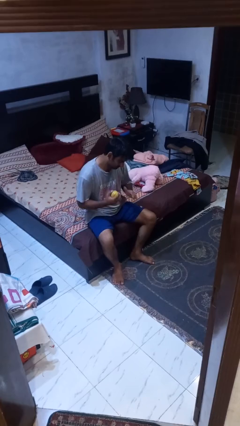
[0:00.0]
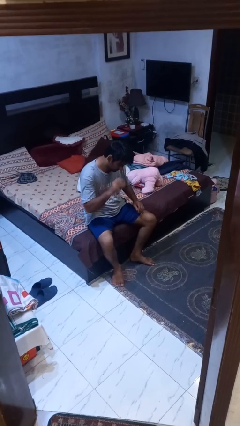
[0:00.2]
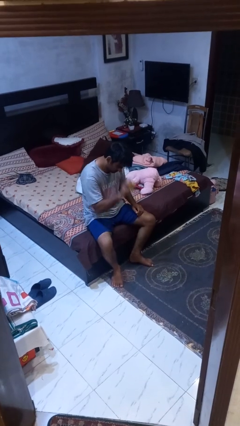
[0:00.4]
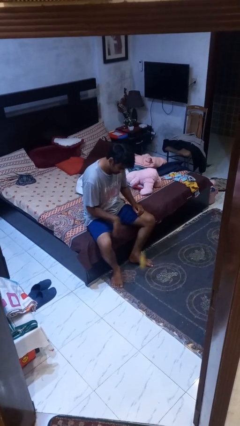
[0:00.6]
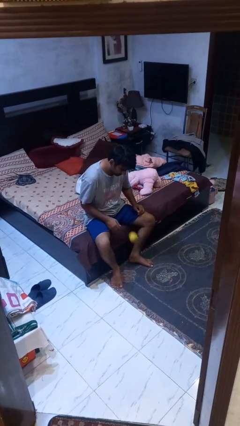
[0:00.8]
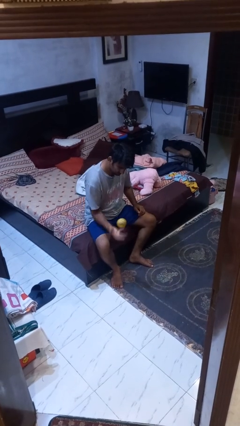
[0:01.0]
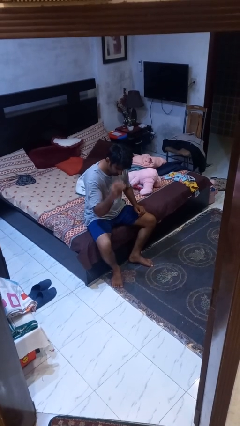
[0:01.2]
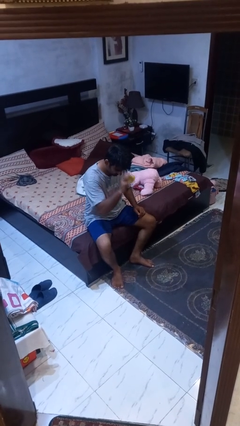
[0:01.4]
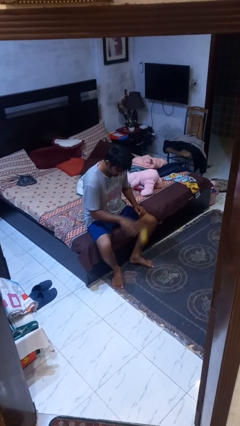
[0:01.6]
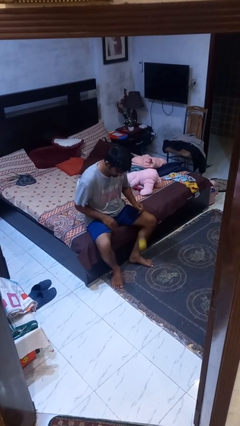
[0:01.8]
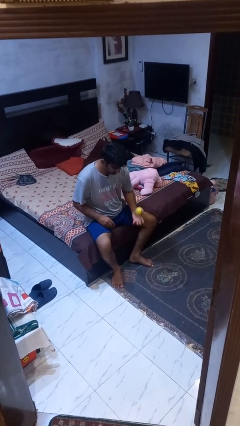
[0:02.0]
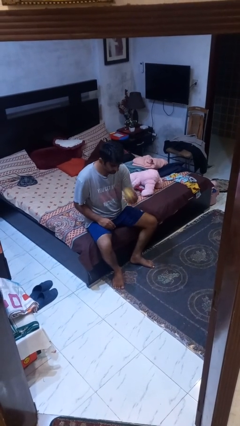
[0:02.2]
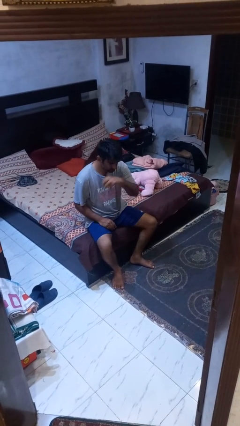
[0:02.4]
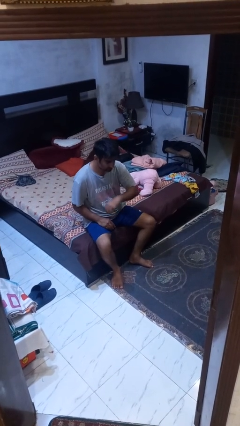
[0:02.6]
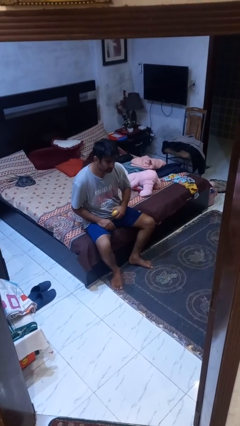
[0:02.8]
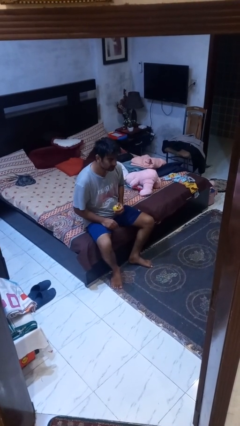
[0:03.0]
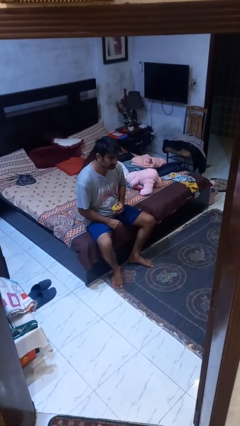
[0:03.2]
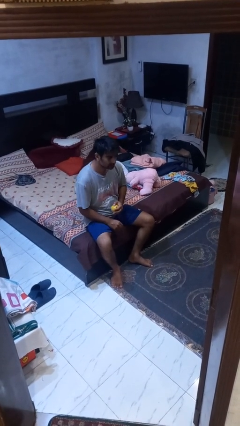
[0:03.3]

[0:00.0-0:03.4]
person bounces ball on floor

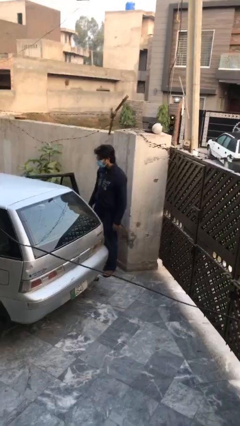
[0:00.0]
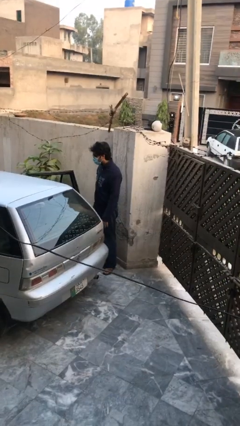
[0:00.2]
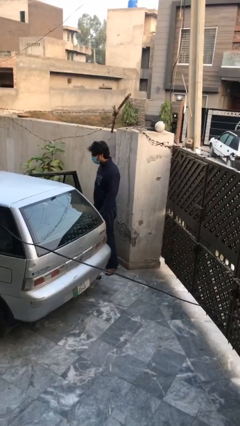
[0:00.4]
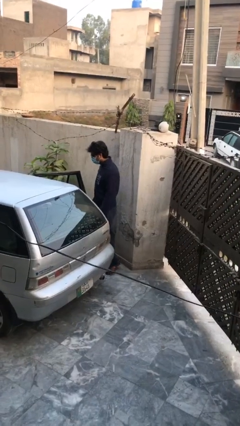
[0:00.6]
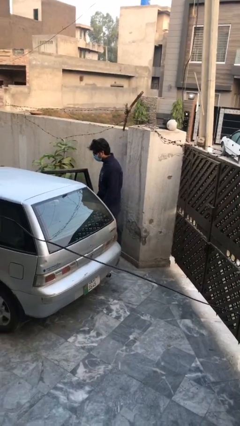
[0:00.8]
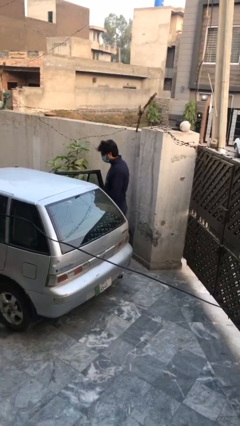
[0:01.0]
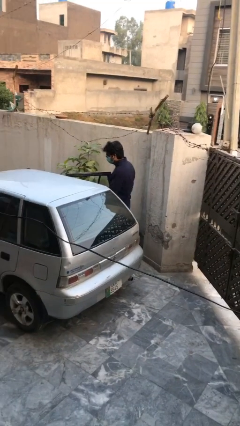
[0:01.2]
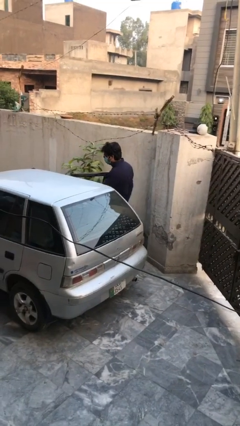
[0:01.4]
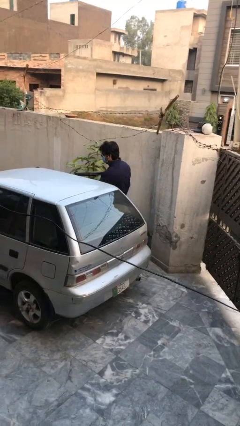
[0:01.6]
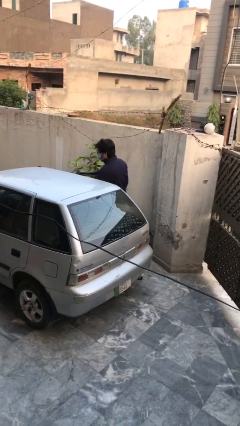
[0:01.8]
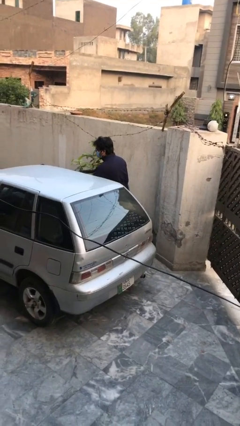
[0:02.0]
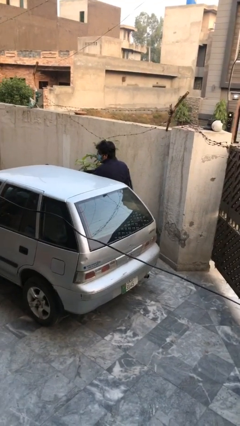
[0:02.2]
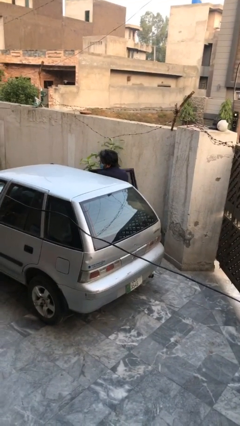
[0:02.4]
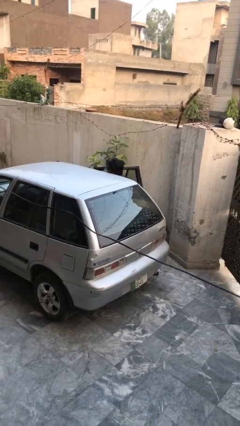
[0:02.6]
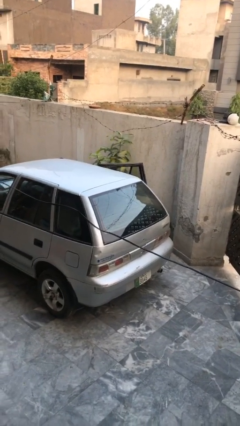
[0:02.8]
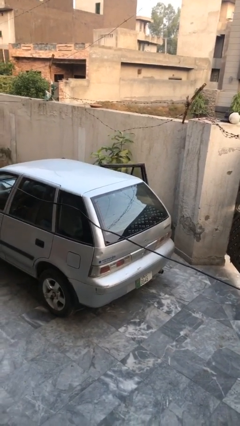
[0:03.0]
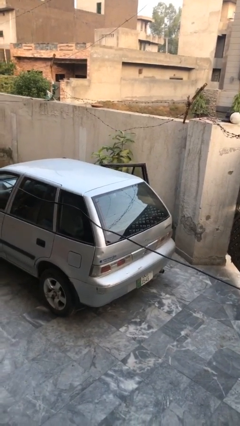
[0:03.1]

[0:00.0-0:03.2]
person enters car

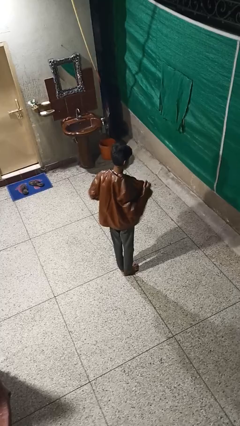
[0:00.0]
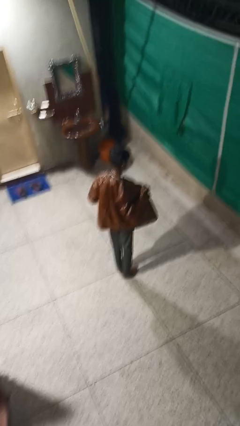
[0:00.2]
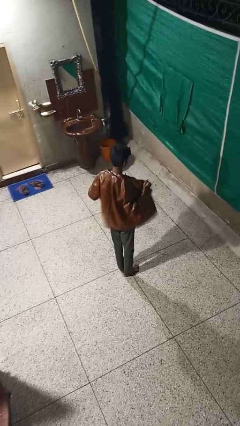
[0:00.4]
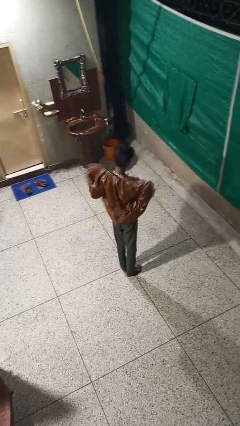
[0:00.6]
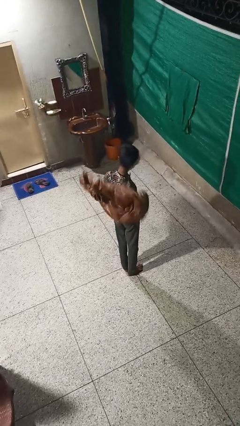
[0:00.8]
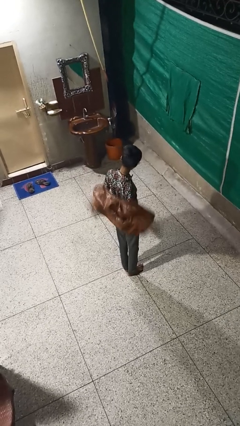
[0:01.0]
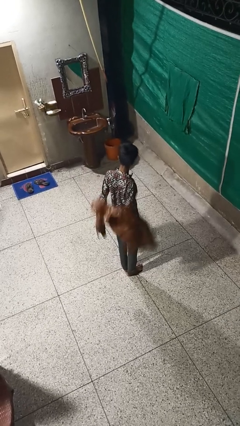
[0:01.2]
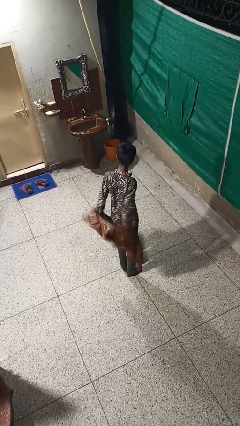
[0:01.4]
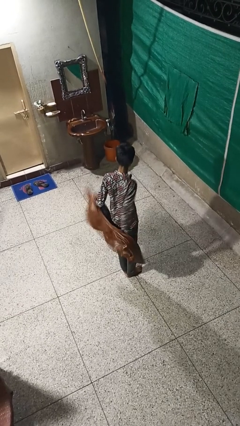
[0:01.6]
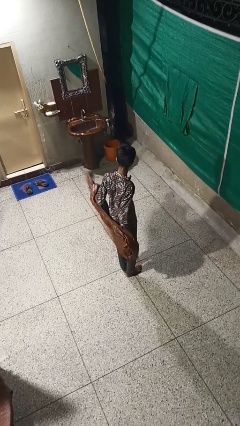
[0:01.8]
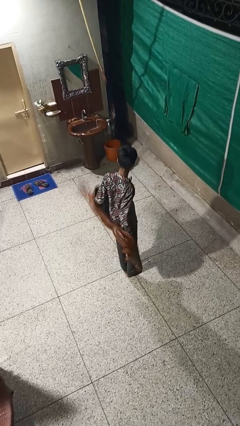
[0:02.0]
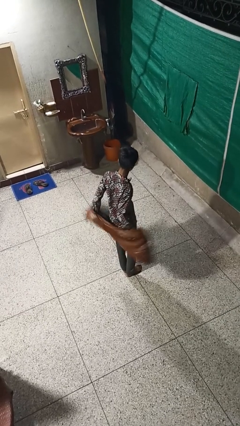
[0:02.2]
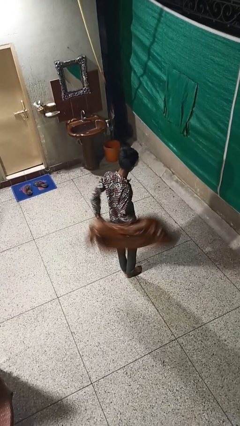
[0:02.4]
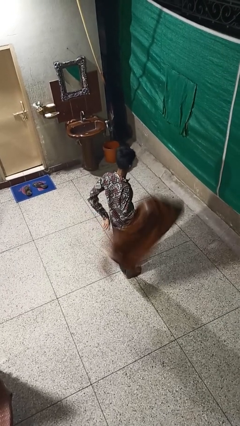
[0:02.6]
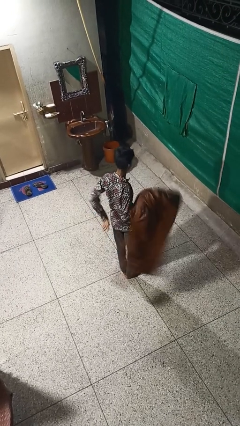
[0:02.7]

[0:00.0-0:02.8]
person takes off jacket

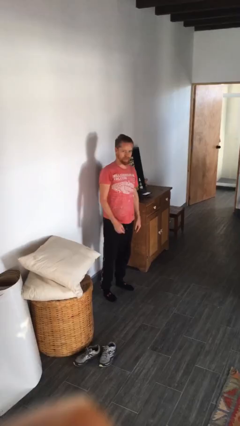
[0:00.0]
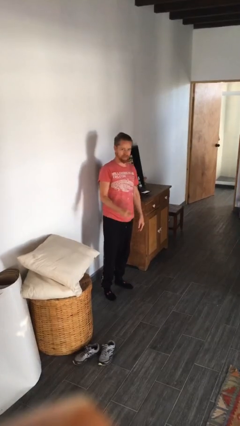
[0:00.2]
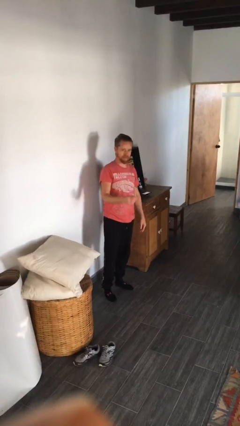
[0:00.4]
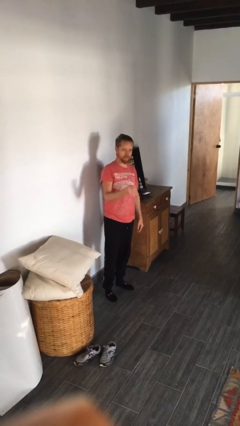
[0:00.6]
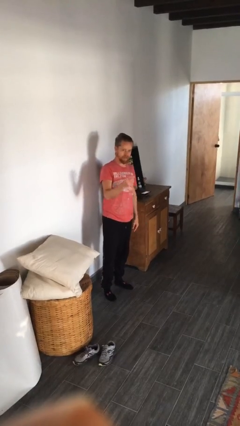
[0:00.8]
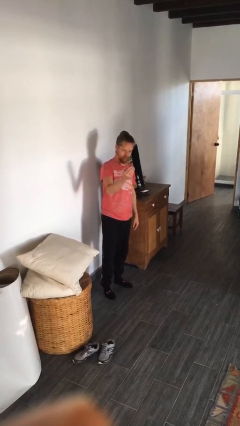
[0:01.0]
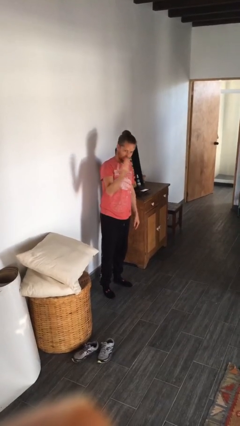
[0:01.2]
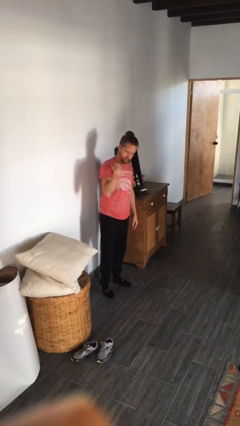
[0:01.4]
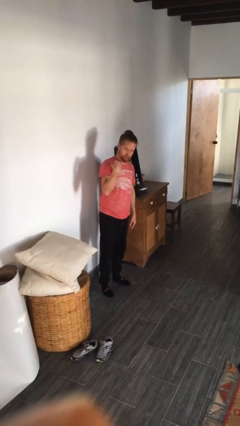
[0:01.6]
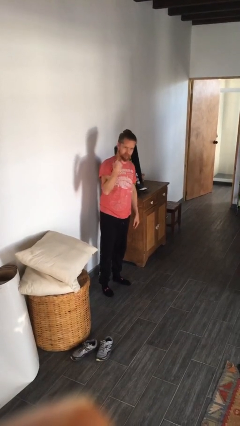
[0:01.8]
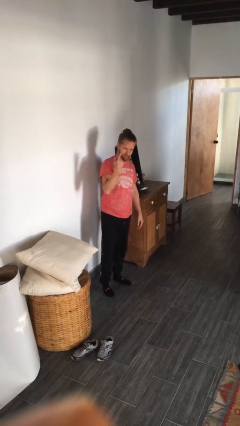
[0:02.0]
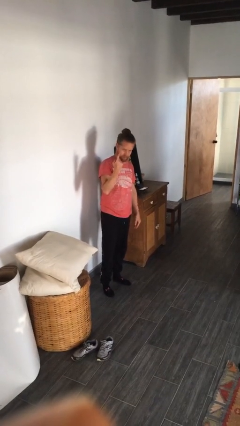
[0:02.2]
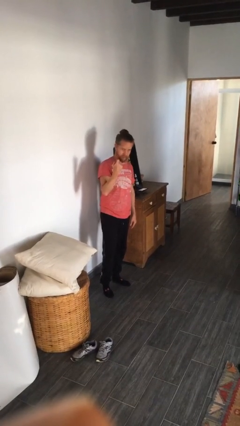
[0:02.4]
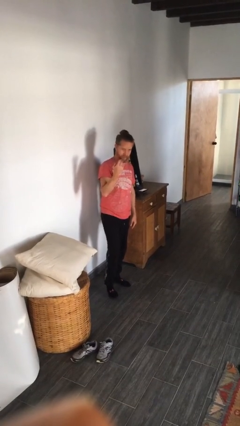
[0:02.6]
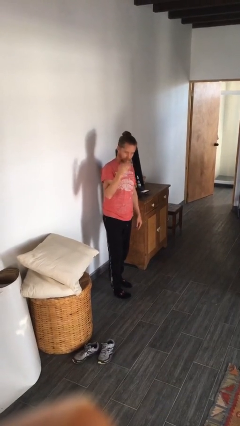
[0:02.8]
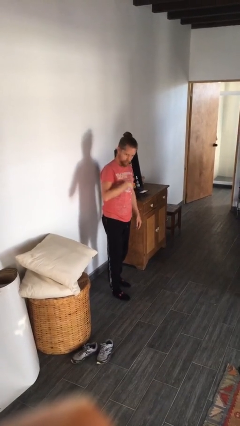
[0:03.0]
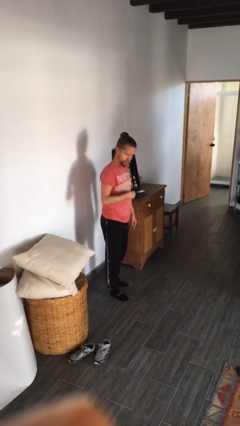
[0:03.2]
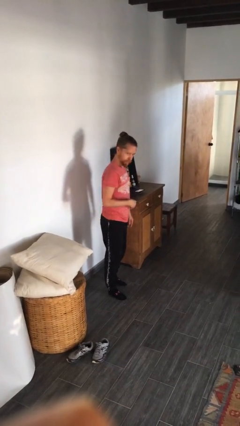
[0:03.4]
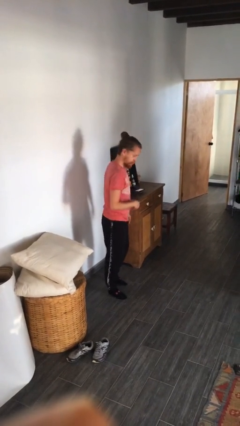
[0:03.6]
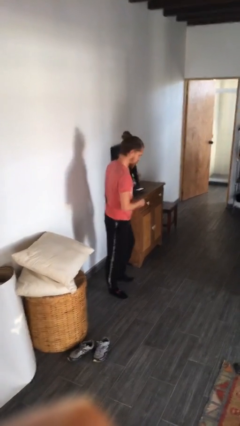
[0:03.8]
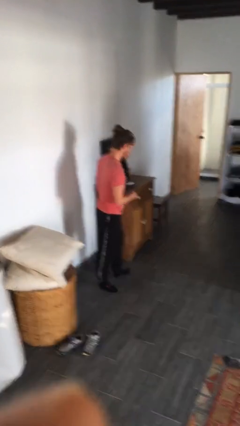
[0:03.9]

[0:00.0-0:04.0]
person gestures come here

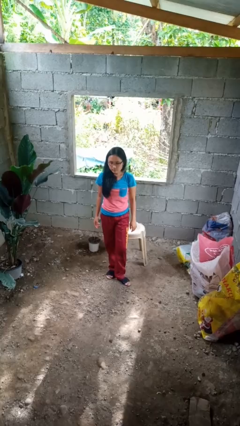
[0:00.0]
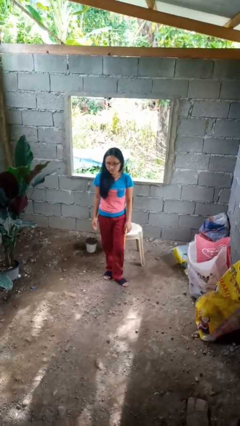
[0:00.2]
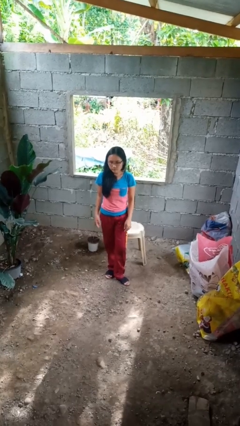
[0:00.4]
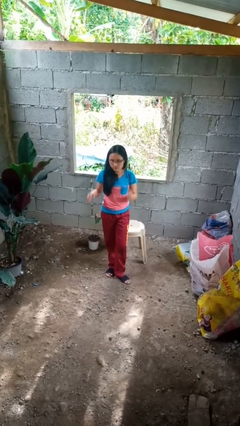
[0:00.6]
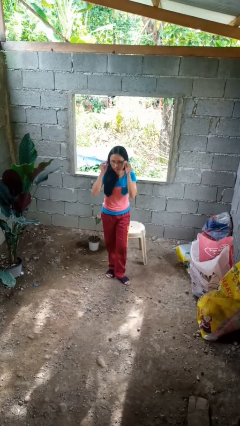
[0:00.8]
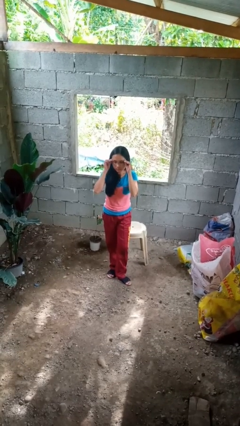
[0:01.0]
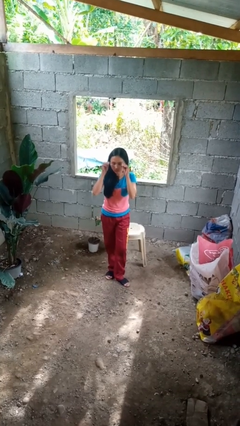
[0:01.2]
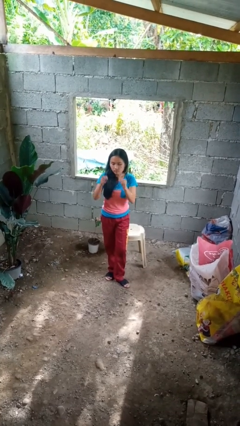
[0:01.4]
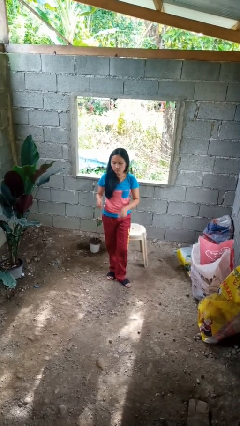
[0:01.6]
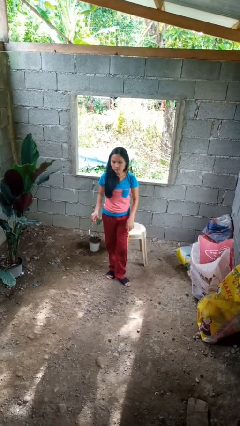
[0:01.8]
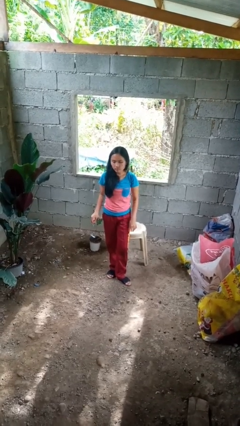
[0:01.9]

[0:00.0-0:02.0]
person takes off glasses

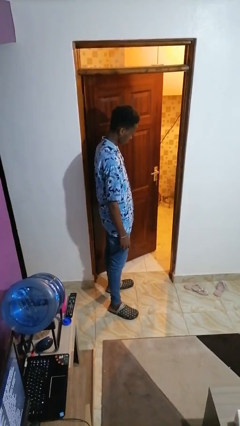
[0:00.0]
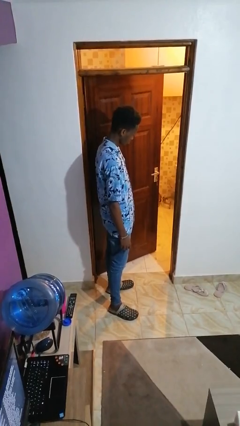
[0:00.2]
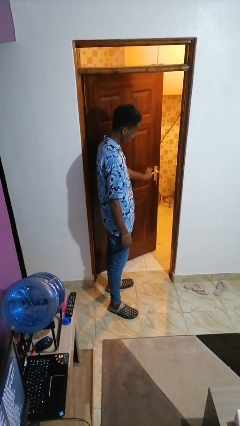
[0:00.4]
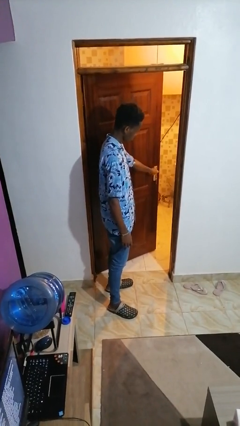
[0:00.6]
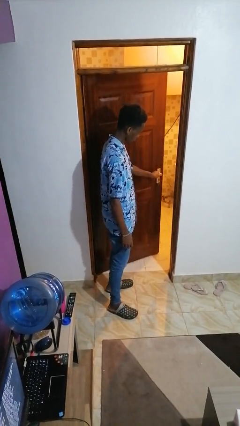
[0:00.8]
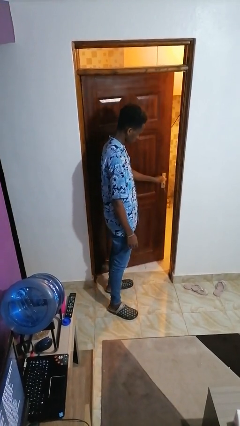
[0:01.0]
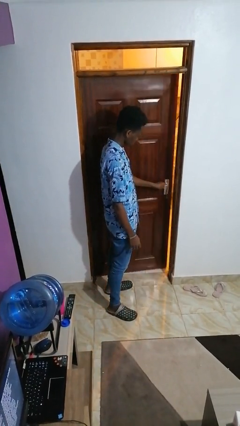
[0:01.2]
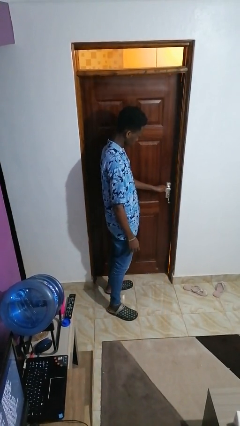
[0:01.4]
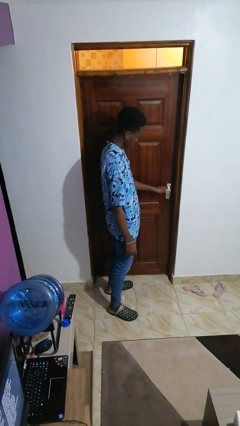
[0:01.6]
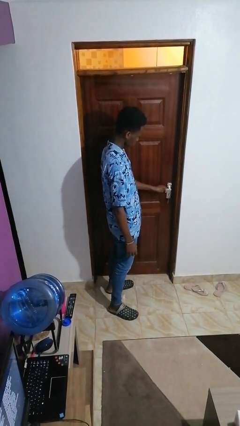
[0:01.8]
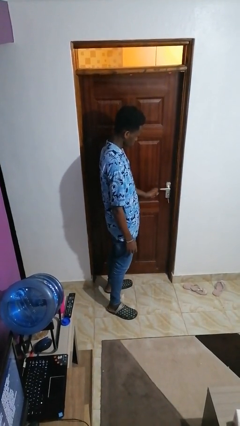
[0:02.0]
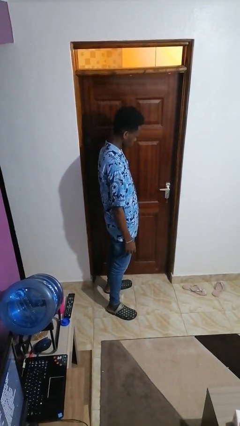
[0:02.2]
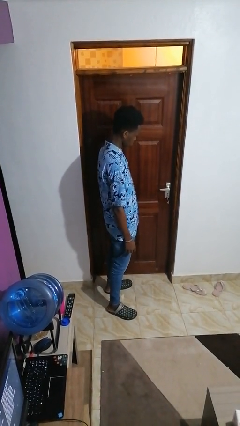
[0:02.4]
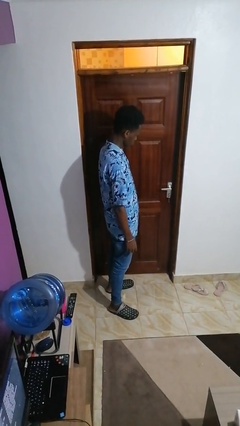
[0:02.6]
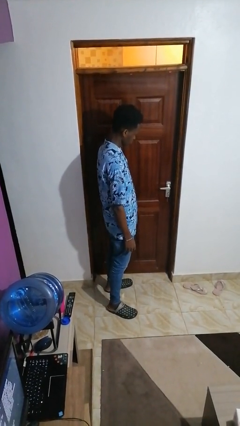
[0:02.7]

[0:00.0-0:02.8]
person closes facility door
